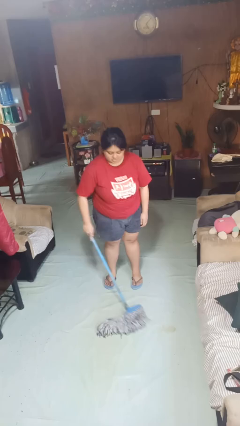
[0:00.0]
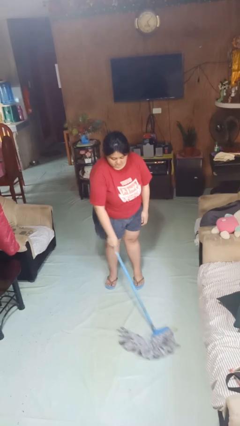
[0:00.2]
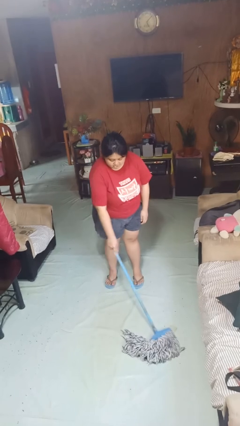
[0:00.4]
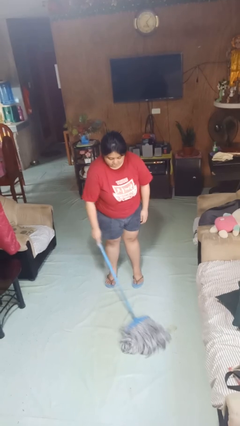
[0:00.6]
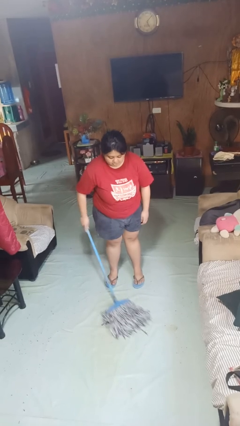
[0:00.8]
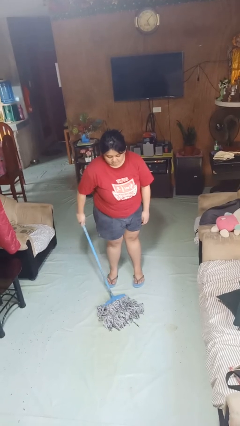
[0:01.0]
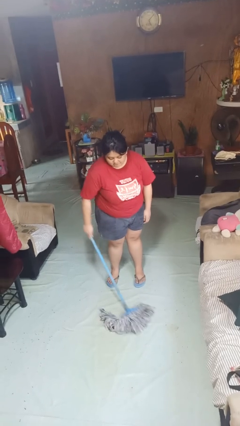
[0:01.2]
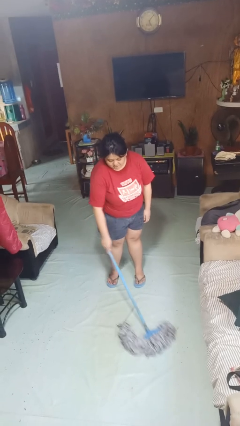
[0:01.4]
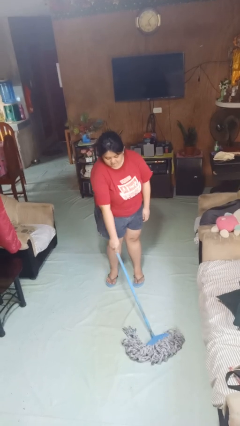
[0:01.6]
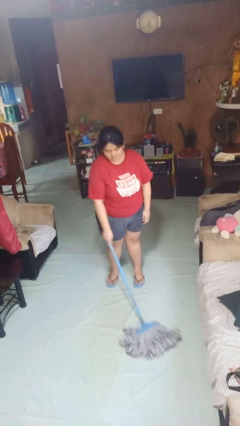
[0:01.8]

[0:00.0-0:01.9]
person mops

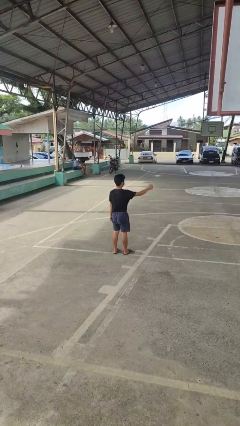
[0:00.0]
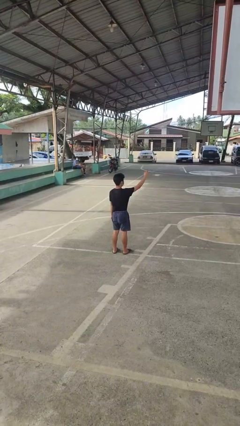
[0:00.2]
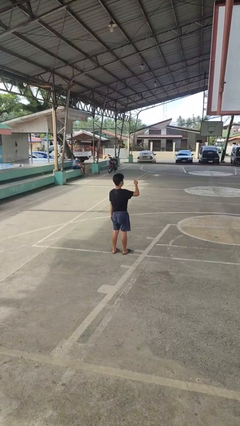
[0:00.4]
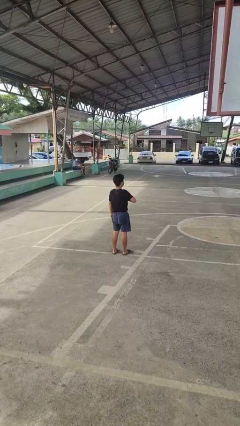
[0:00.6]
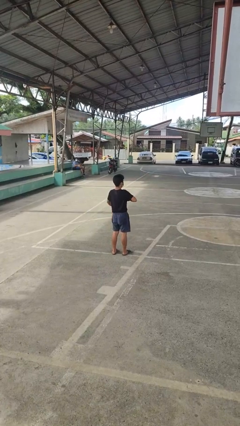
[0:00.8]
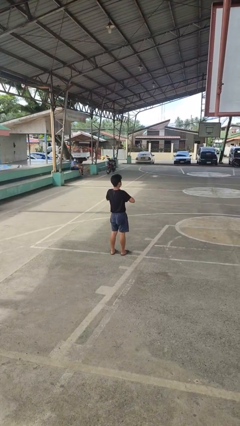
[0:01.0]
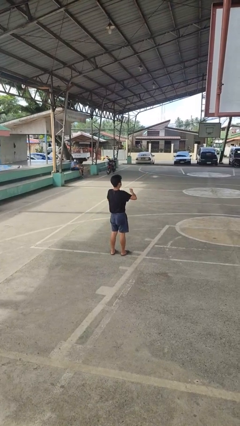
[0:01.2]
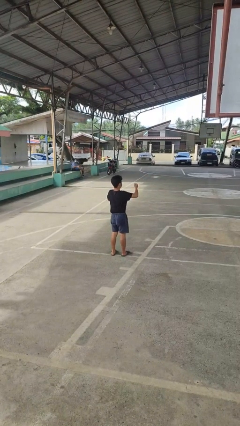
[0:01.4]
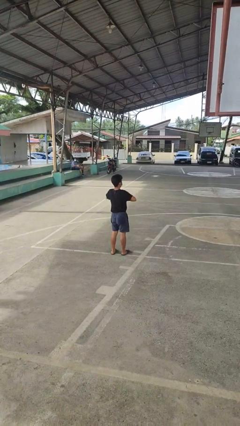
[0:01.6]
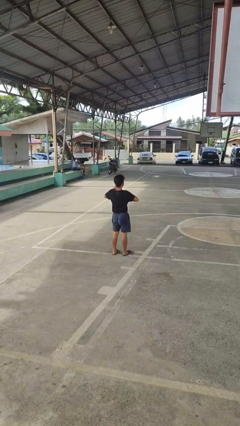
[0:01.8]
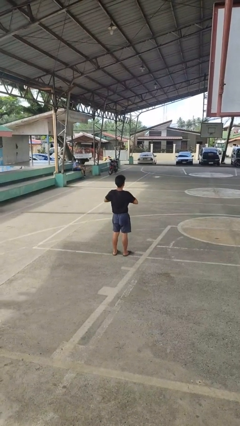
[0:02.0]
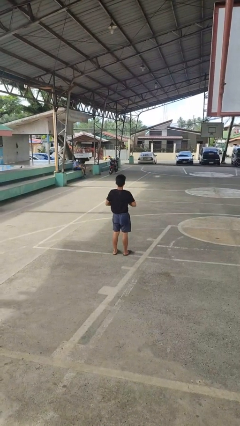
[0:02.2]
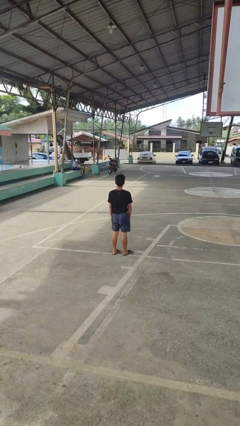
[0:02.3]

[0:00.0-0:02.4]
person drums on chest

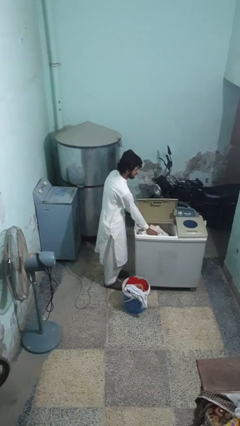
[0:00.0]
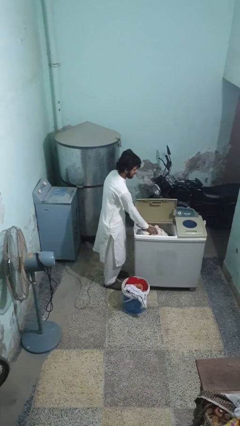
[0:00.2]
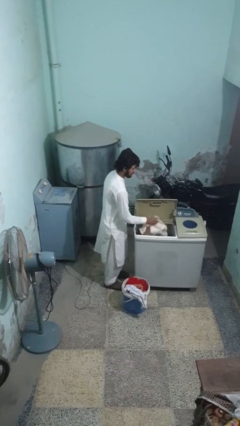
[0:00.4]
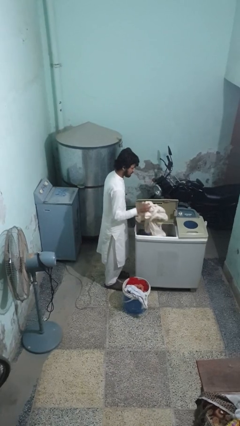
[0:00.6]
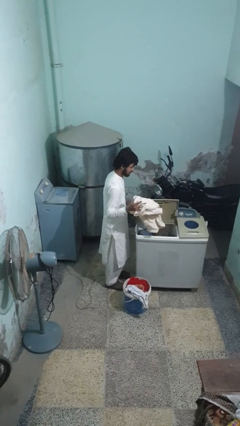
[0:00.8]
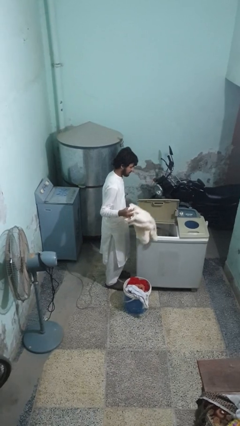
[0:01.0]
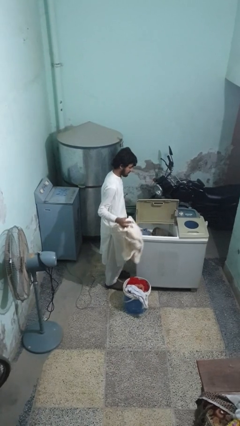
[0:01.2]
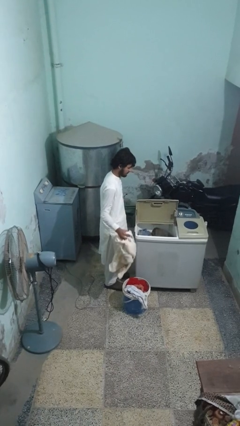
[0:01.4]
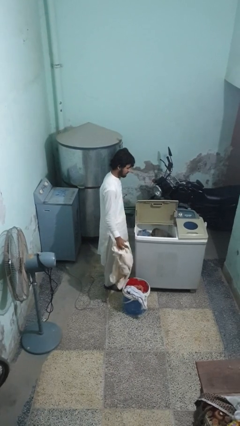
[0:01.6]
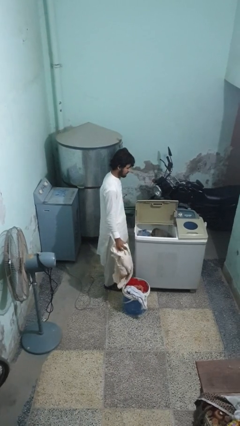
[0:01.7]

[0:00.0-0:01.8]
person unloads clotheswasher

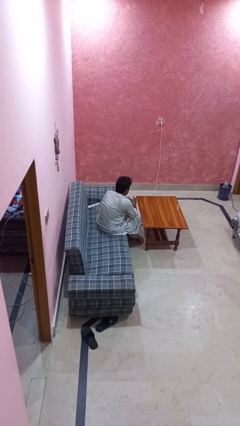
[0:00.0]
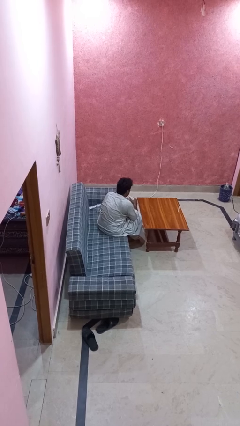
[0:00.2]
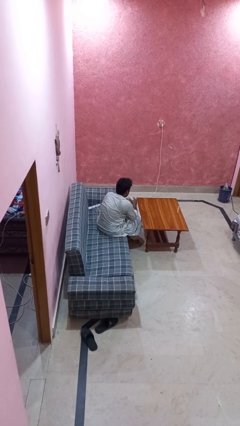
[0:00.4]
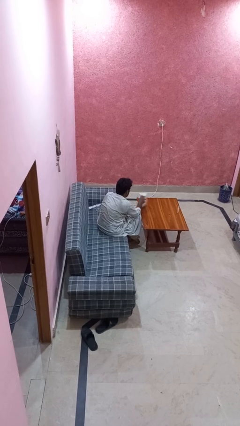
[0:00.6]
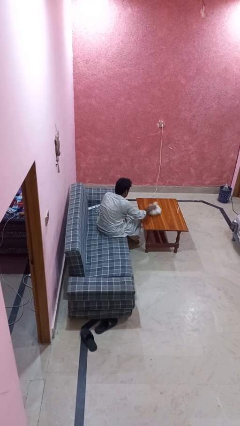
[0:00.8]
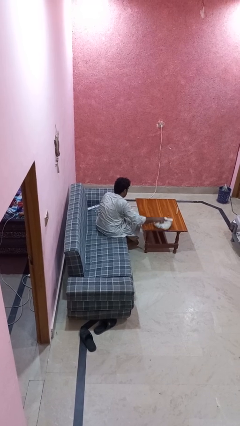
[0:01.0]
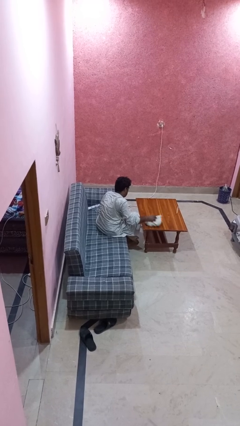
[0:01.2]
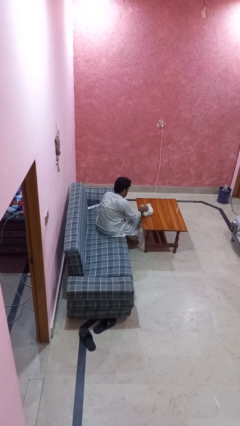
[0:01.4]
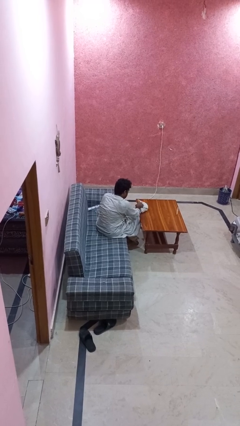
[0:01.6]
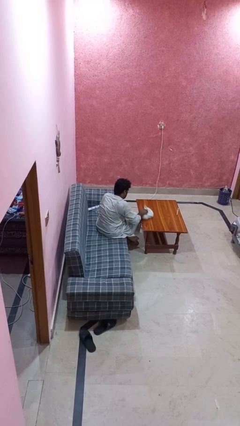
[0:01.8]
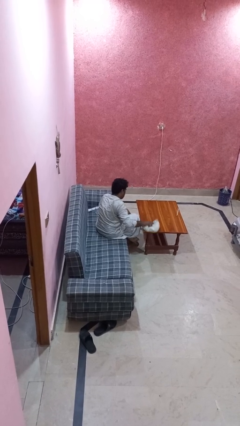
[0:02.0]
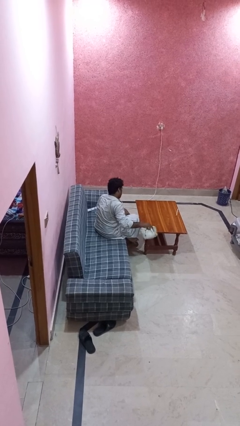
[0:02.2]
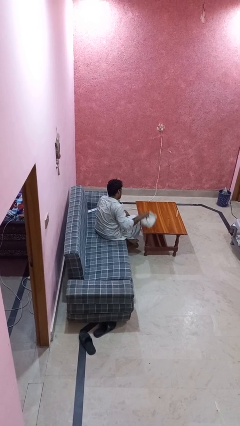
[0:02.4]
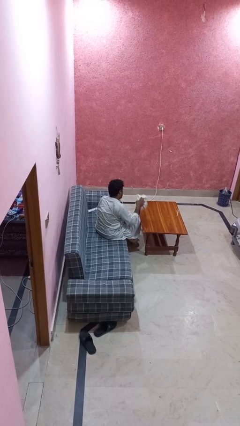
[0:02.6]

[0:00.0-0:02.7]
person cleans table with rag

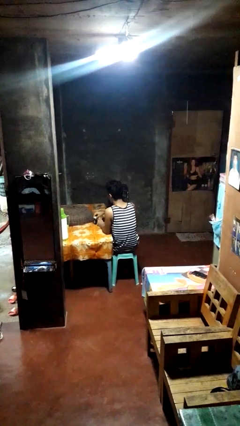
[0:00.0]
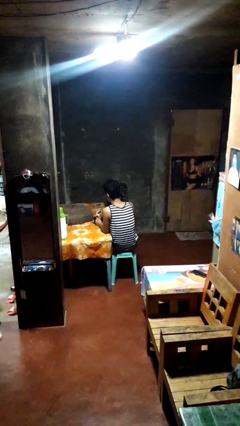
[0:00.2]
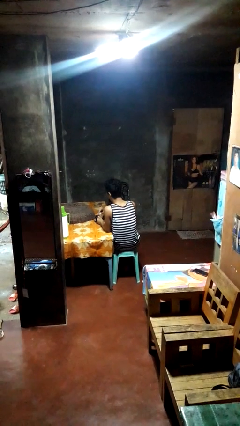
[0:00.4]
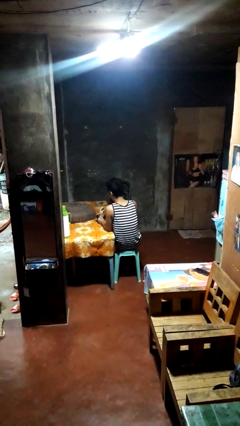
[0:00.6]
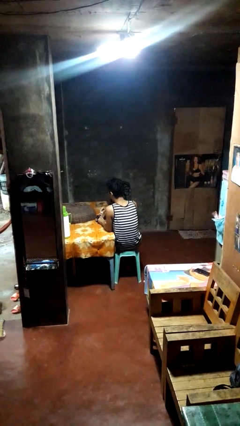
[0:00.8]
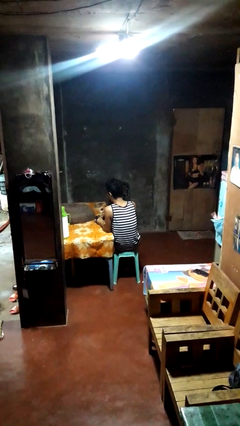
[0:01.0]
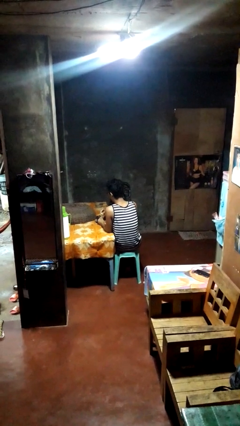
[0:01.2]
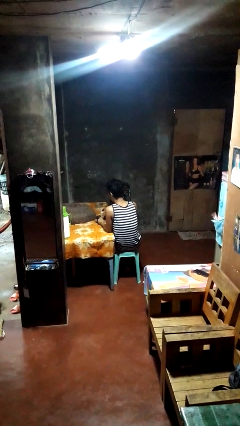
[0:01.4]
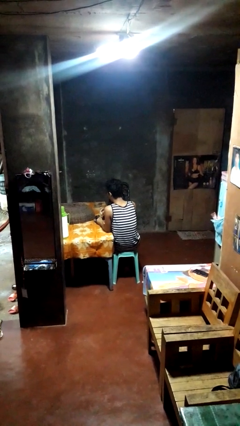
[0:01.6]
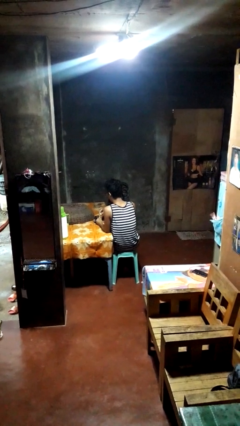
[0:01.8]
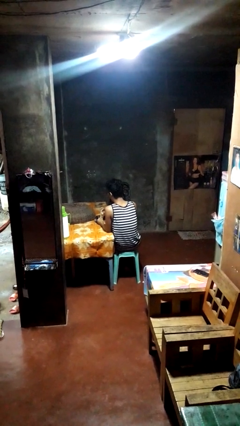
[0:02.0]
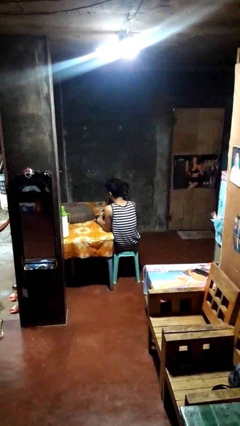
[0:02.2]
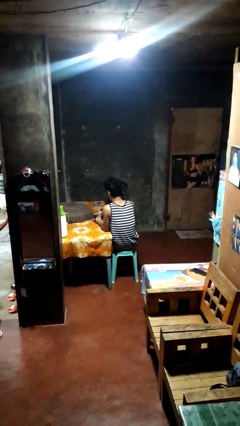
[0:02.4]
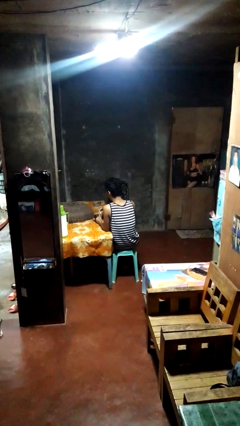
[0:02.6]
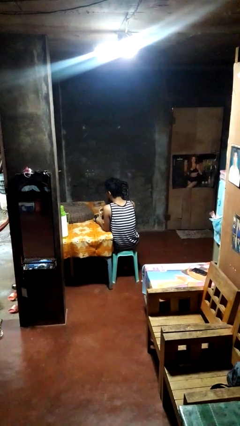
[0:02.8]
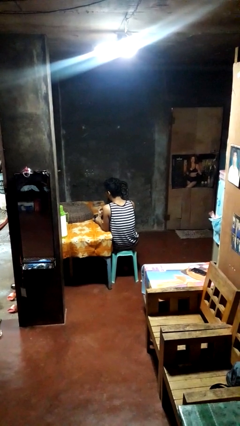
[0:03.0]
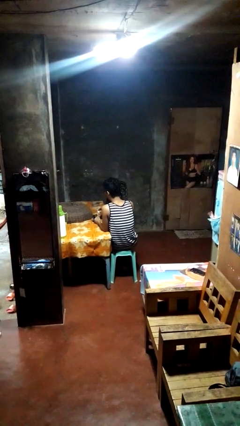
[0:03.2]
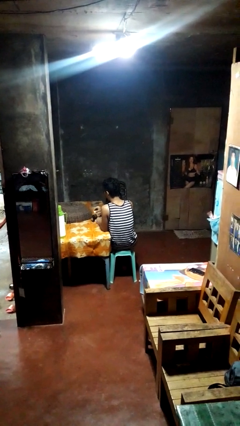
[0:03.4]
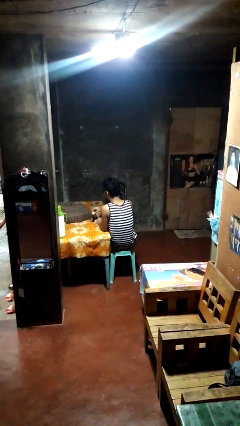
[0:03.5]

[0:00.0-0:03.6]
person paints fingernails

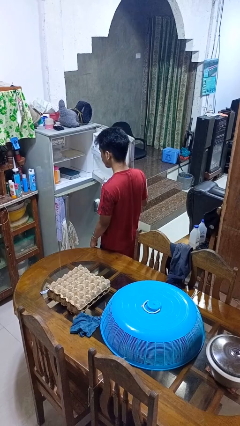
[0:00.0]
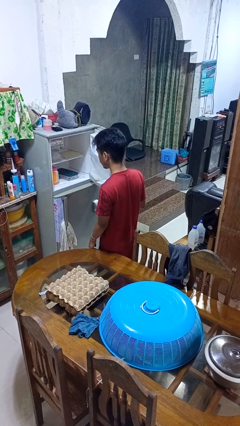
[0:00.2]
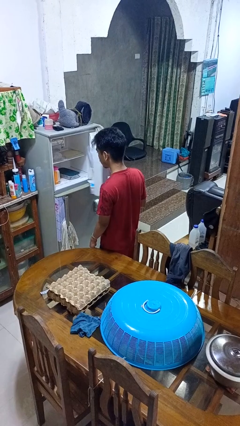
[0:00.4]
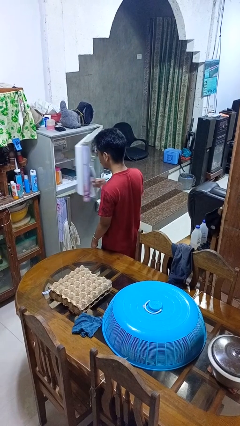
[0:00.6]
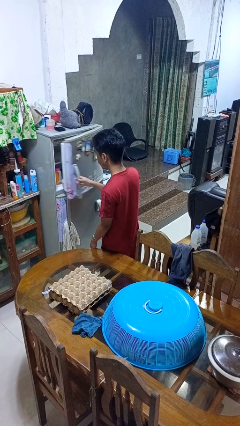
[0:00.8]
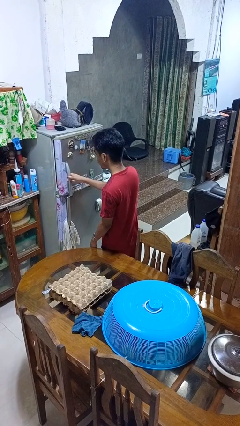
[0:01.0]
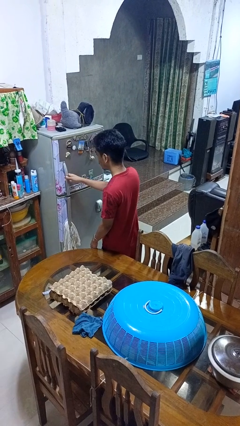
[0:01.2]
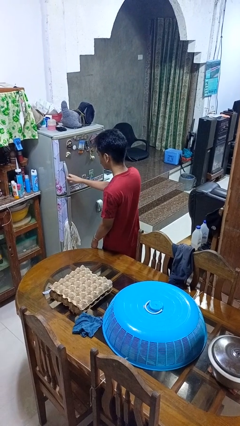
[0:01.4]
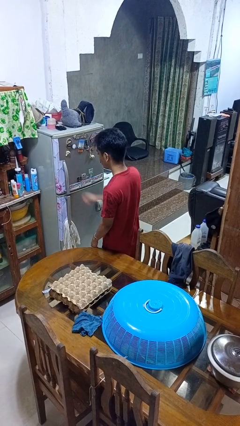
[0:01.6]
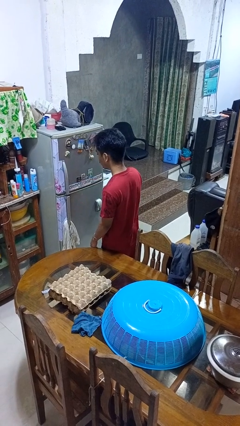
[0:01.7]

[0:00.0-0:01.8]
person closes refrigerator

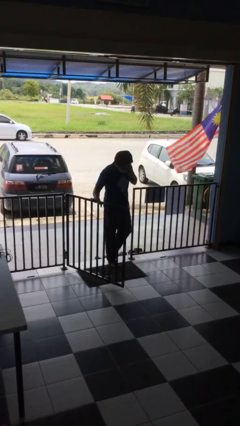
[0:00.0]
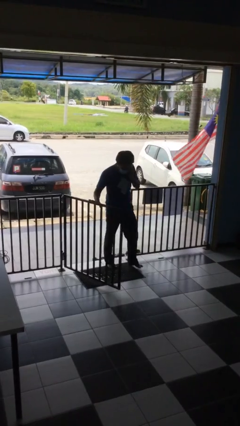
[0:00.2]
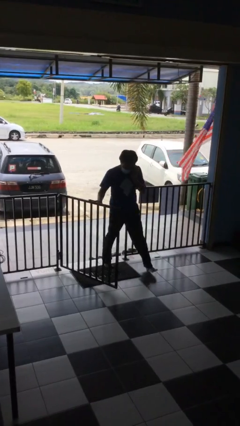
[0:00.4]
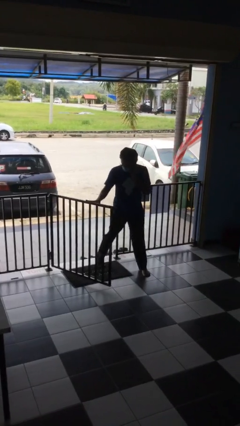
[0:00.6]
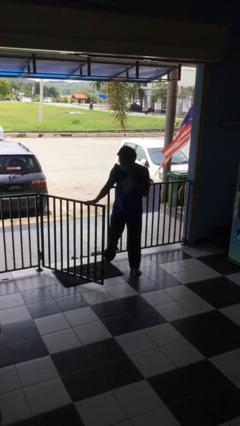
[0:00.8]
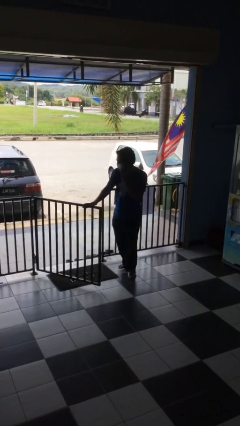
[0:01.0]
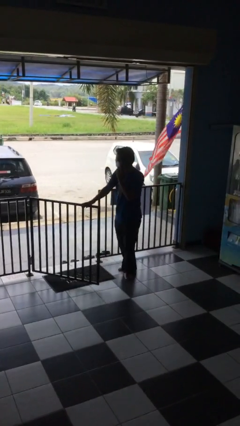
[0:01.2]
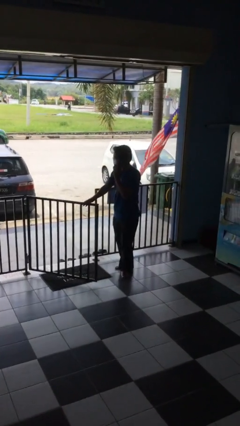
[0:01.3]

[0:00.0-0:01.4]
person enters scene through structure

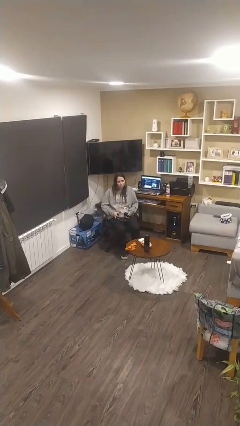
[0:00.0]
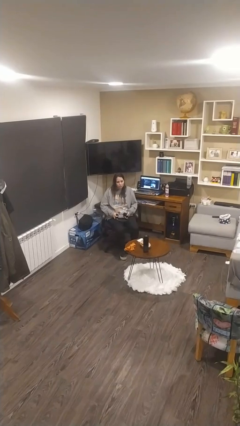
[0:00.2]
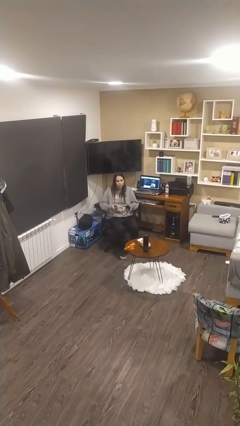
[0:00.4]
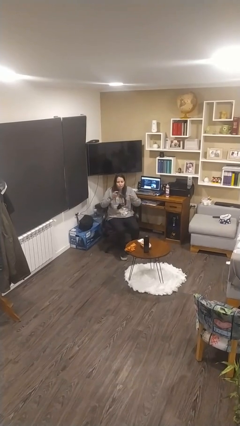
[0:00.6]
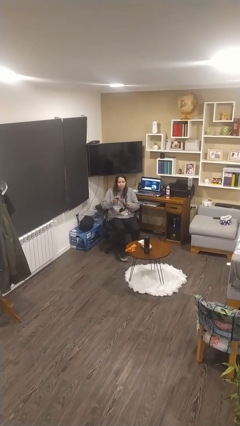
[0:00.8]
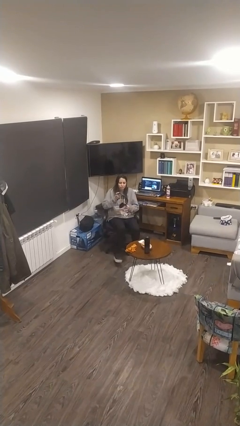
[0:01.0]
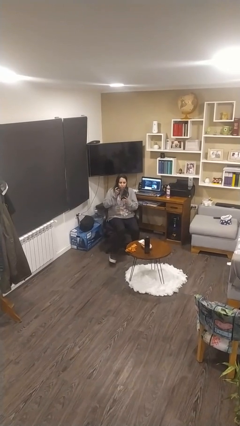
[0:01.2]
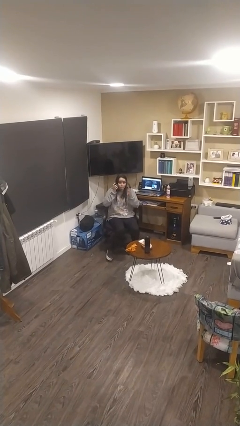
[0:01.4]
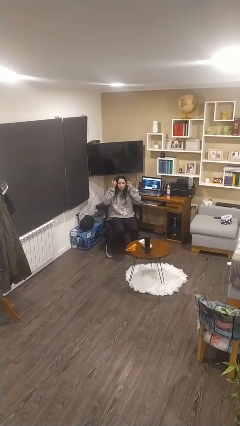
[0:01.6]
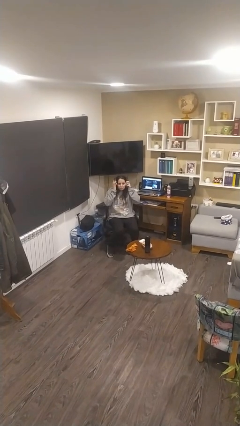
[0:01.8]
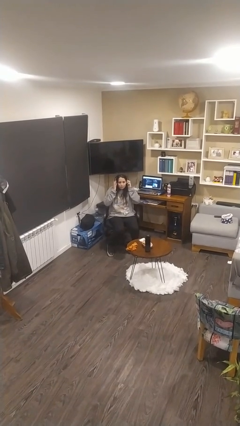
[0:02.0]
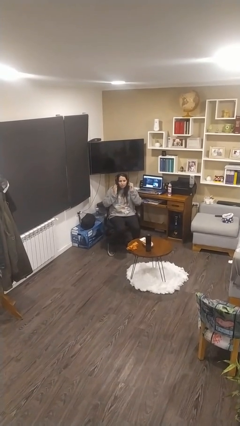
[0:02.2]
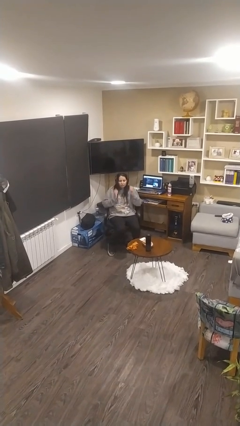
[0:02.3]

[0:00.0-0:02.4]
person puts on headphones
